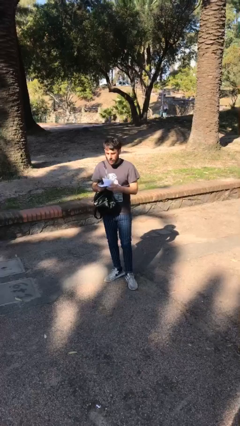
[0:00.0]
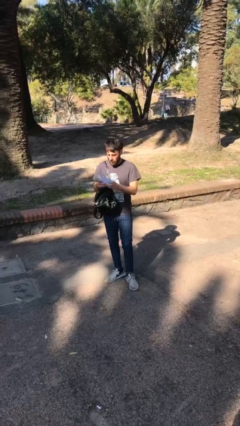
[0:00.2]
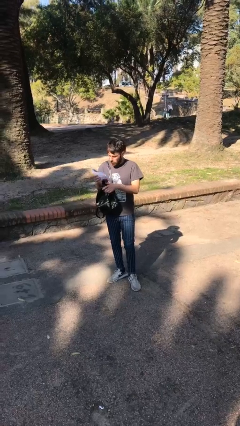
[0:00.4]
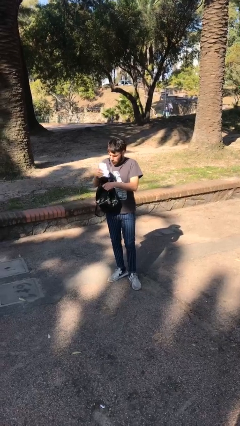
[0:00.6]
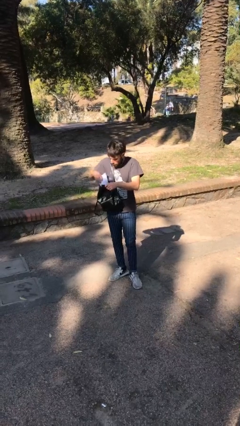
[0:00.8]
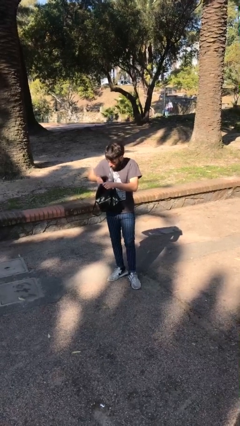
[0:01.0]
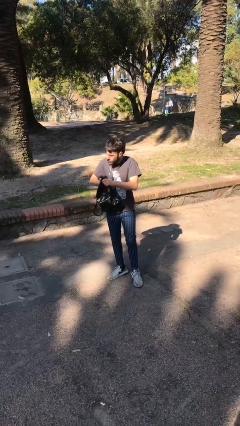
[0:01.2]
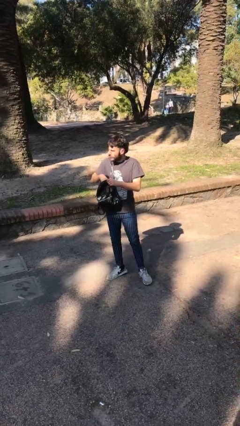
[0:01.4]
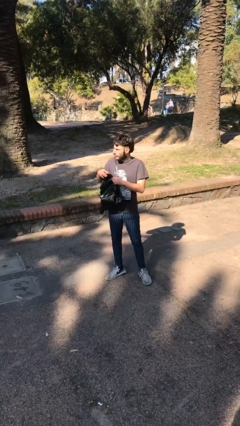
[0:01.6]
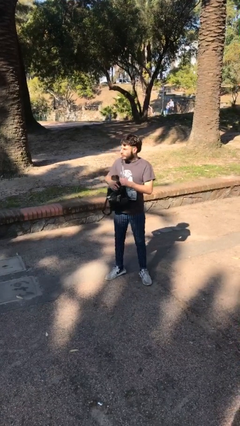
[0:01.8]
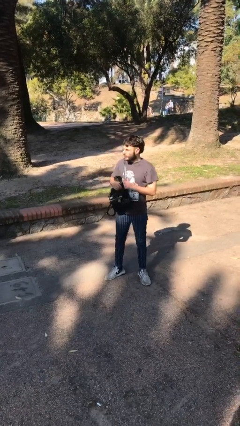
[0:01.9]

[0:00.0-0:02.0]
person puts object into backpack

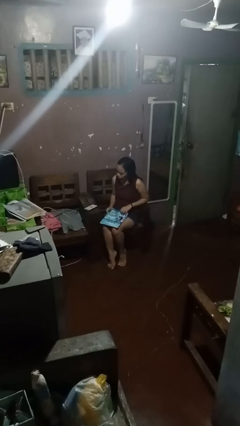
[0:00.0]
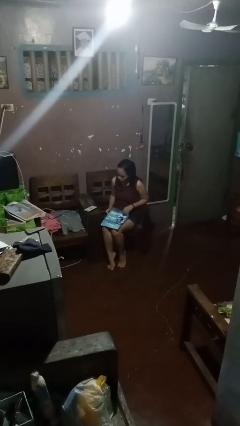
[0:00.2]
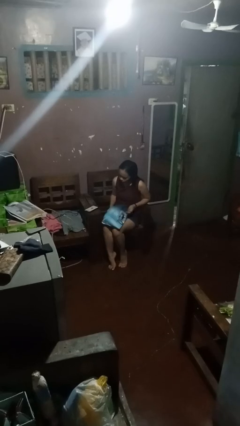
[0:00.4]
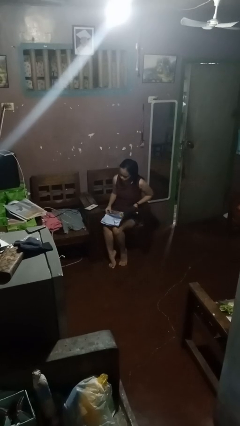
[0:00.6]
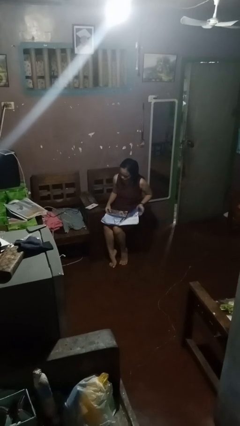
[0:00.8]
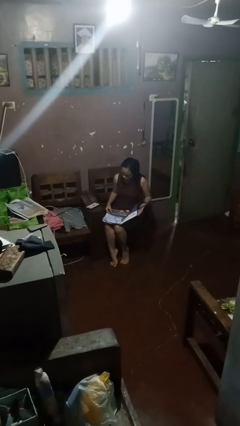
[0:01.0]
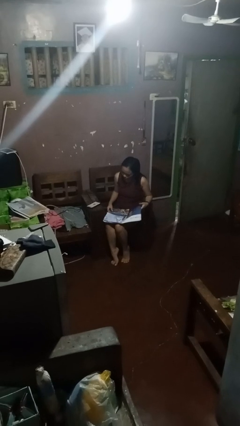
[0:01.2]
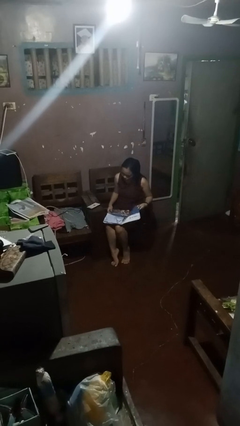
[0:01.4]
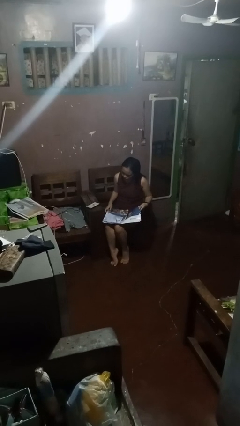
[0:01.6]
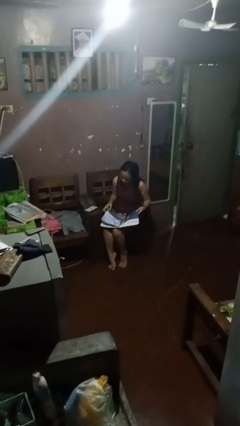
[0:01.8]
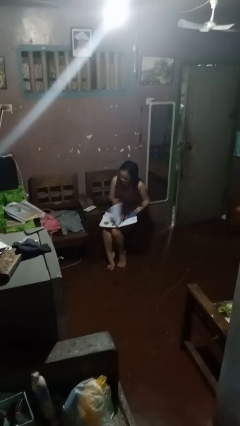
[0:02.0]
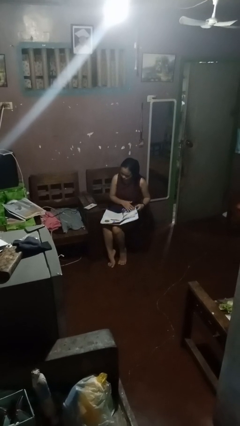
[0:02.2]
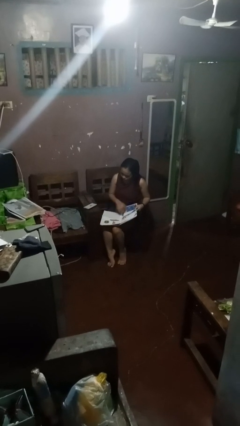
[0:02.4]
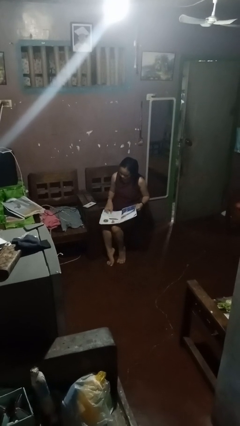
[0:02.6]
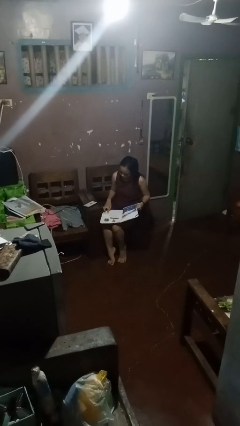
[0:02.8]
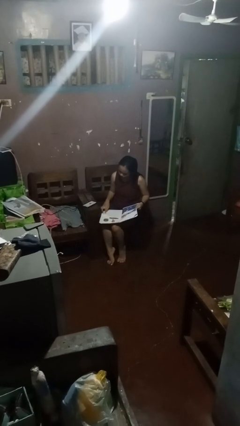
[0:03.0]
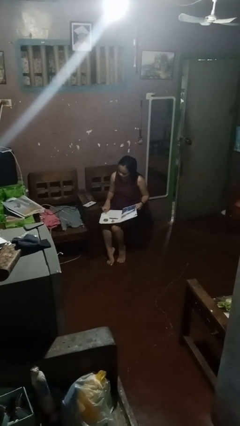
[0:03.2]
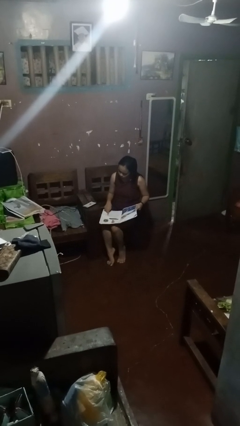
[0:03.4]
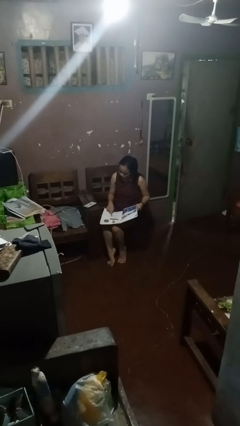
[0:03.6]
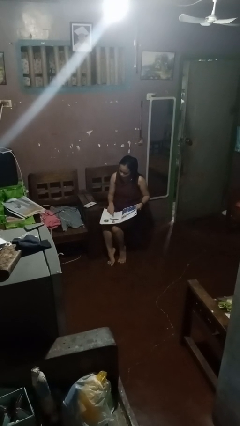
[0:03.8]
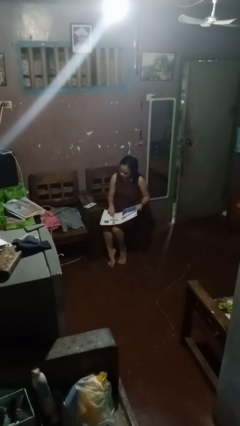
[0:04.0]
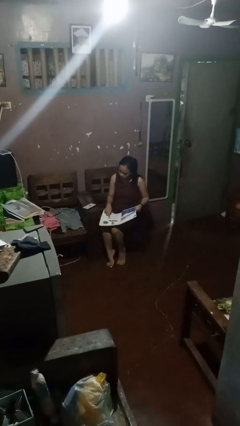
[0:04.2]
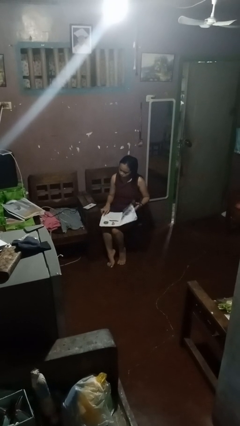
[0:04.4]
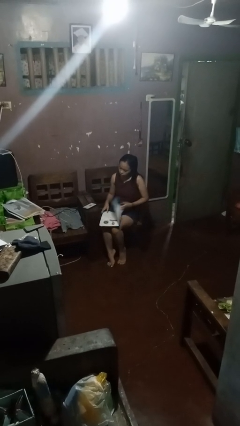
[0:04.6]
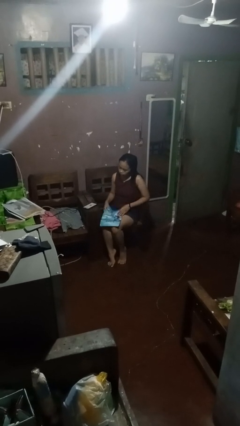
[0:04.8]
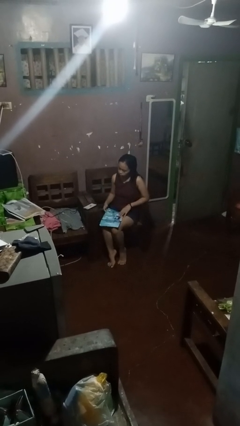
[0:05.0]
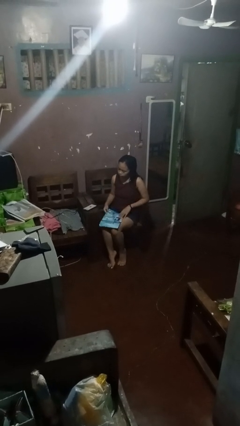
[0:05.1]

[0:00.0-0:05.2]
person reads magazine

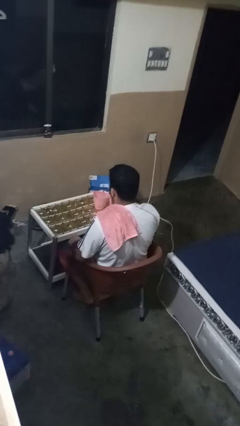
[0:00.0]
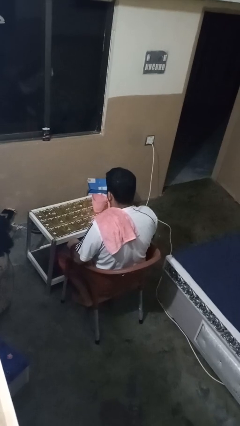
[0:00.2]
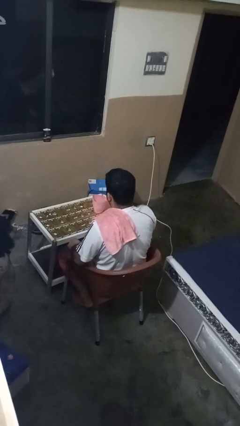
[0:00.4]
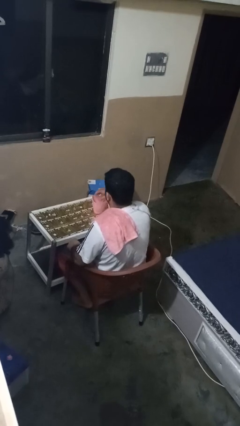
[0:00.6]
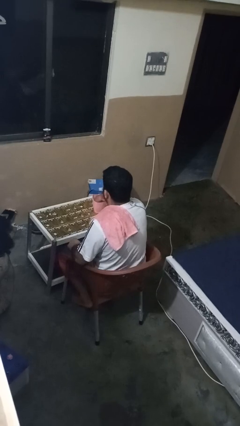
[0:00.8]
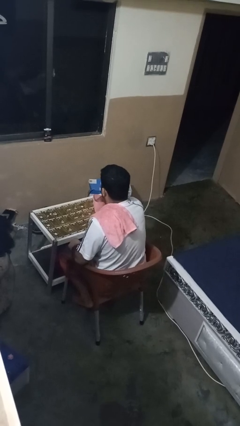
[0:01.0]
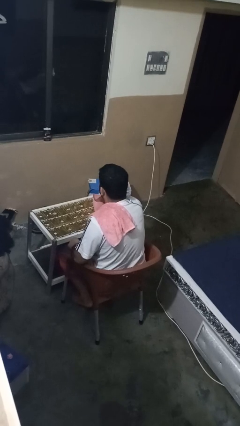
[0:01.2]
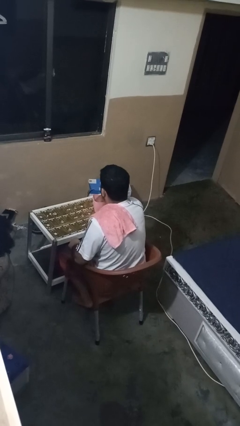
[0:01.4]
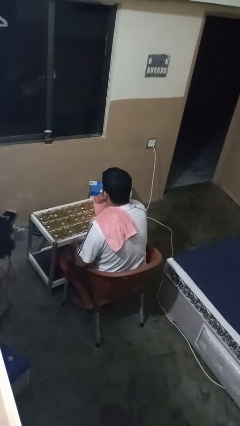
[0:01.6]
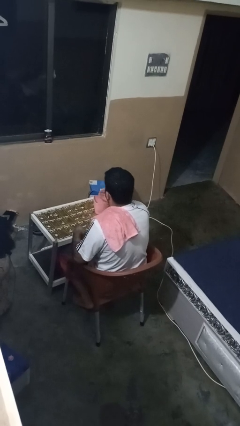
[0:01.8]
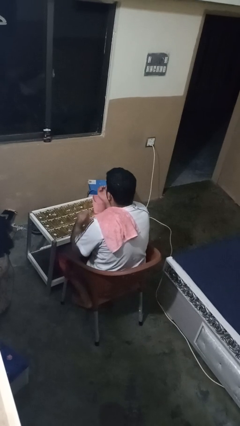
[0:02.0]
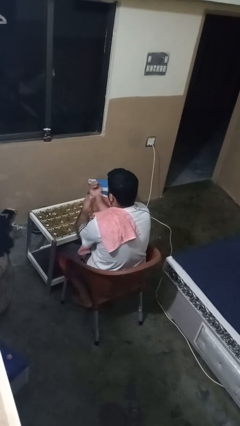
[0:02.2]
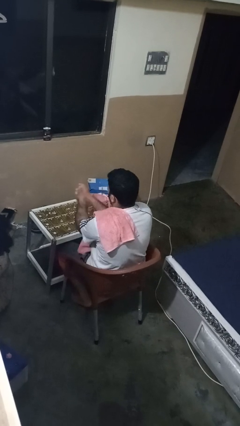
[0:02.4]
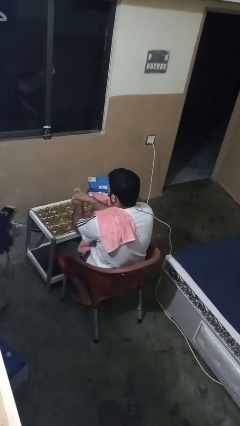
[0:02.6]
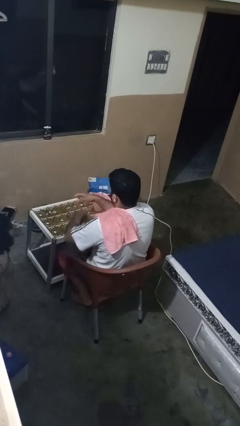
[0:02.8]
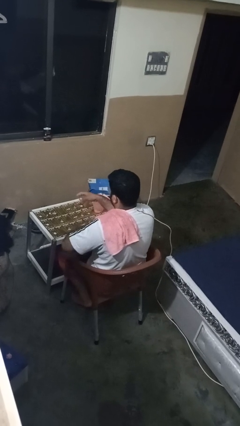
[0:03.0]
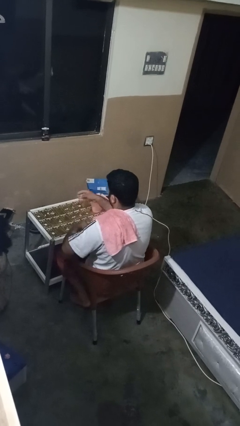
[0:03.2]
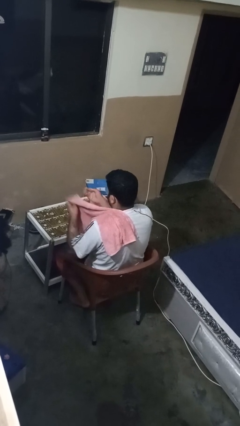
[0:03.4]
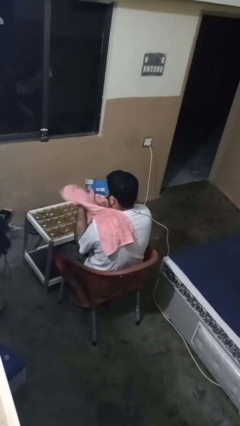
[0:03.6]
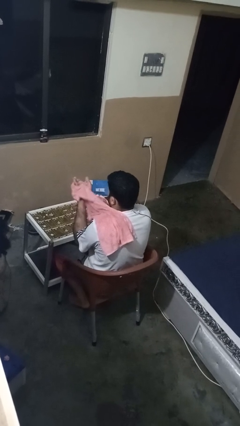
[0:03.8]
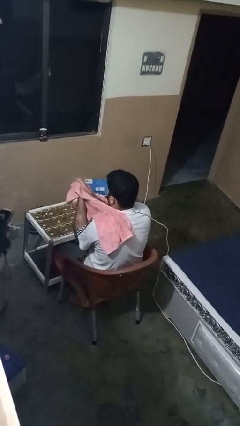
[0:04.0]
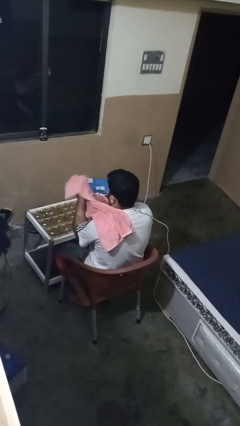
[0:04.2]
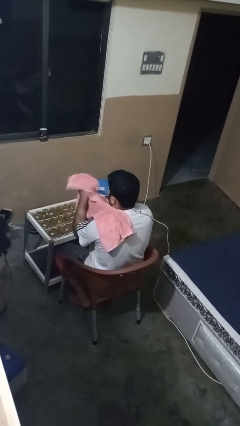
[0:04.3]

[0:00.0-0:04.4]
person washes hands

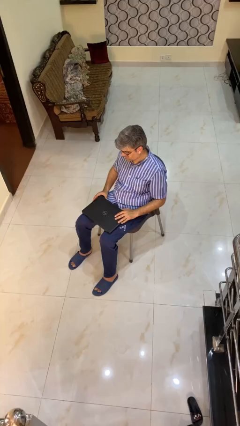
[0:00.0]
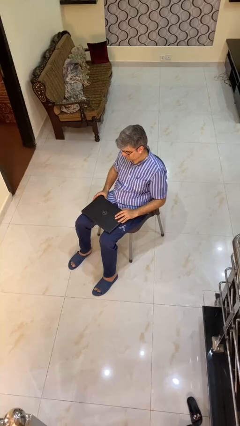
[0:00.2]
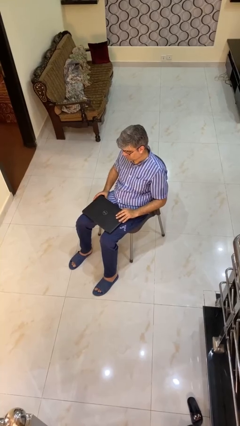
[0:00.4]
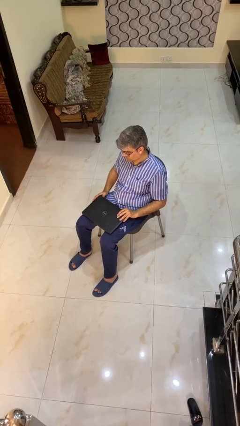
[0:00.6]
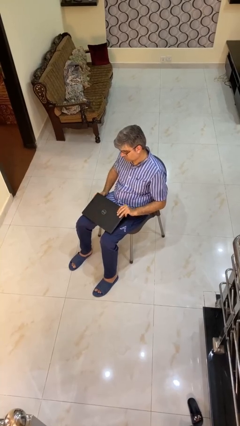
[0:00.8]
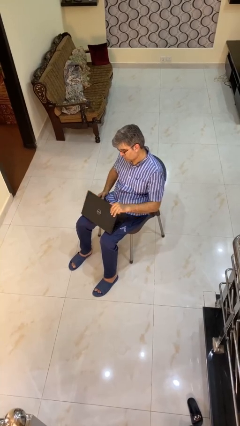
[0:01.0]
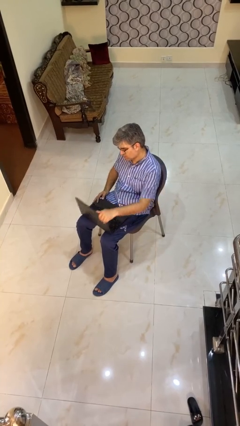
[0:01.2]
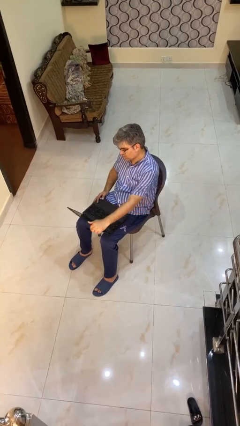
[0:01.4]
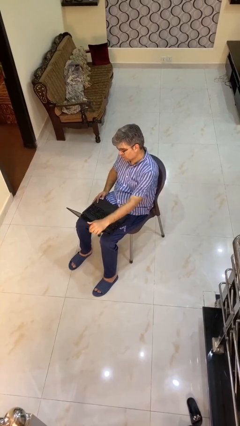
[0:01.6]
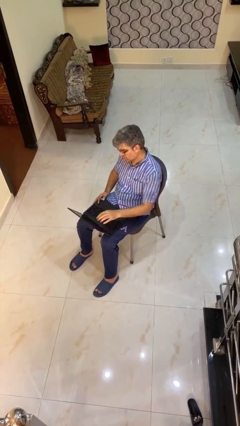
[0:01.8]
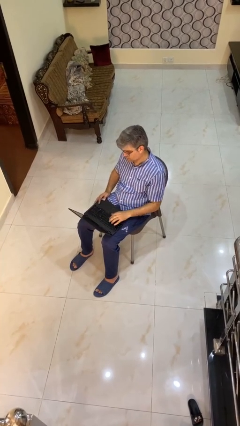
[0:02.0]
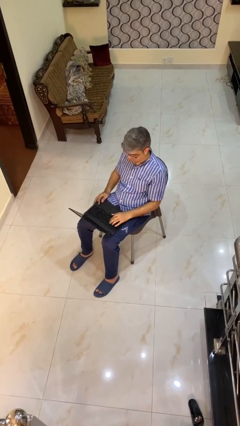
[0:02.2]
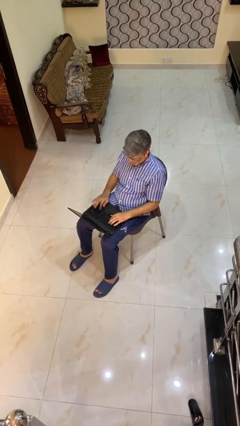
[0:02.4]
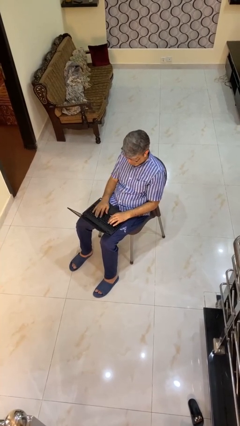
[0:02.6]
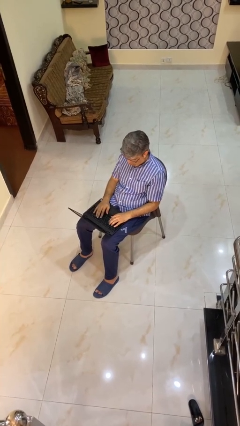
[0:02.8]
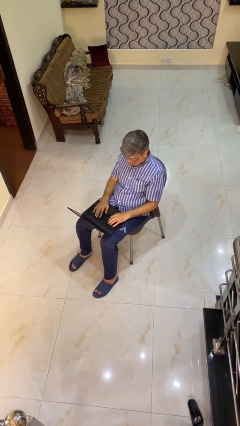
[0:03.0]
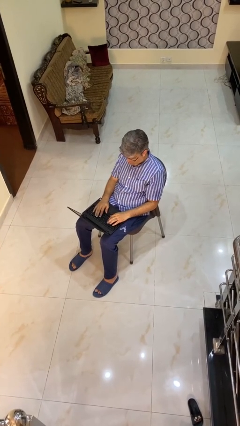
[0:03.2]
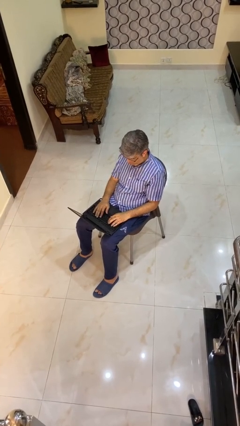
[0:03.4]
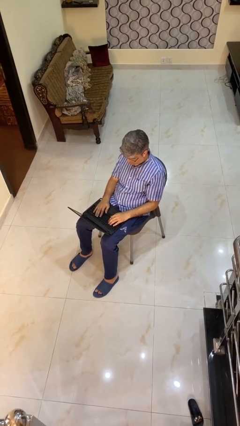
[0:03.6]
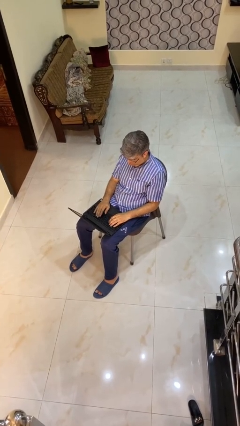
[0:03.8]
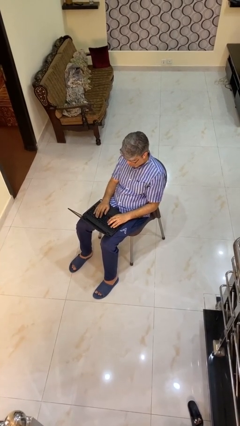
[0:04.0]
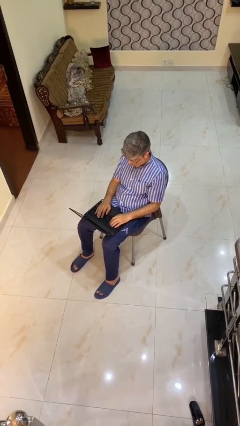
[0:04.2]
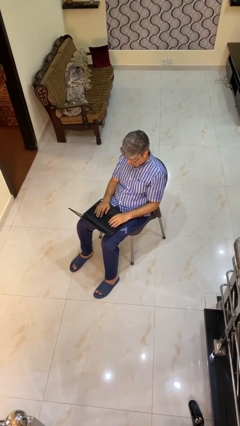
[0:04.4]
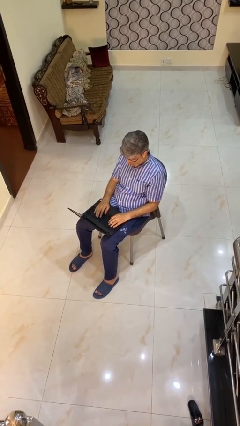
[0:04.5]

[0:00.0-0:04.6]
person opens laptop

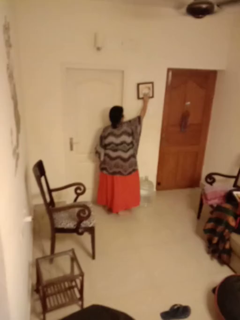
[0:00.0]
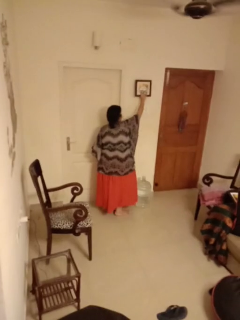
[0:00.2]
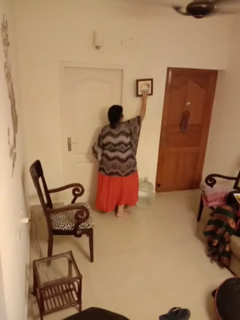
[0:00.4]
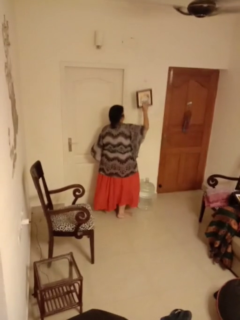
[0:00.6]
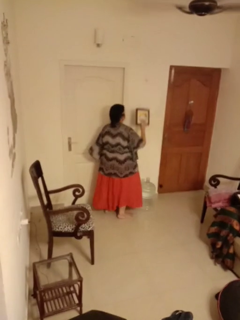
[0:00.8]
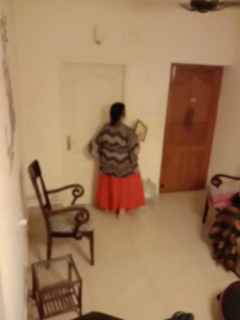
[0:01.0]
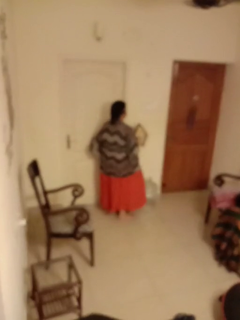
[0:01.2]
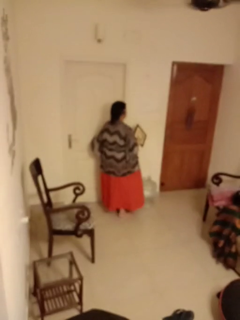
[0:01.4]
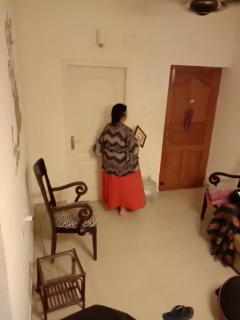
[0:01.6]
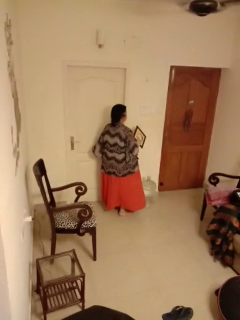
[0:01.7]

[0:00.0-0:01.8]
person takes down picture frame
